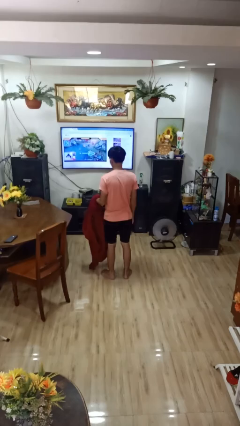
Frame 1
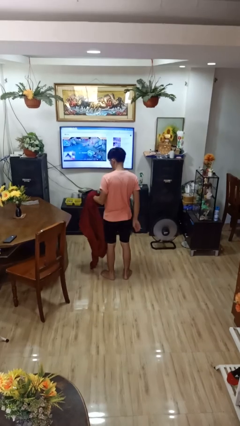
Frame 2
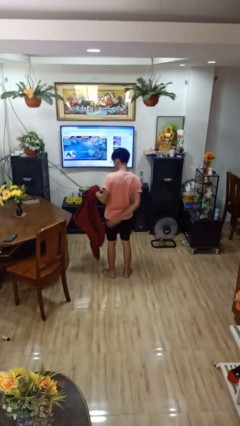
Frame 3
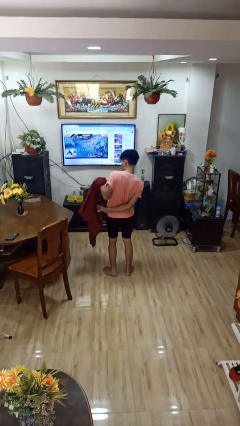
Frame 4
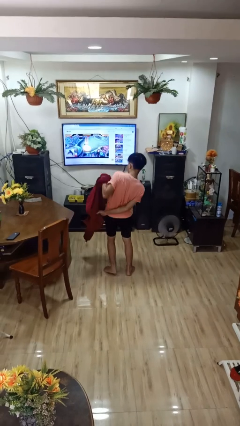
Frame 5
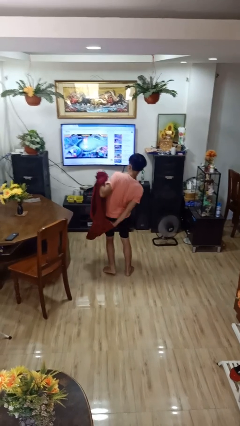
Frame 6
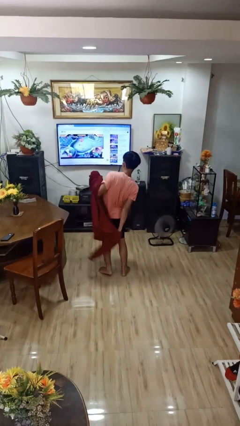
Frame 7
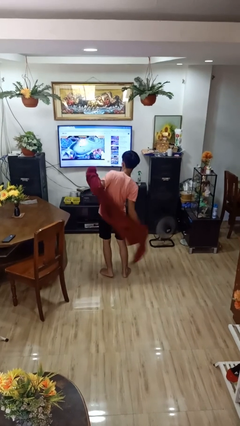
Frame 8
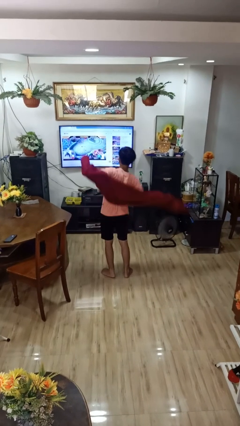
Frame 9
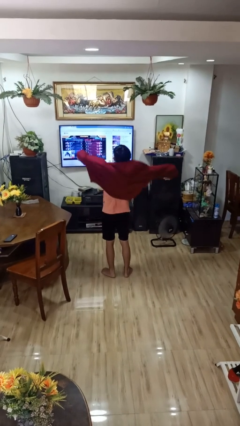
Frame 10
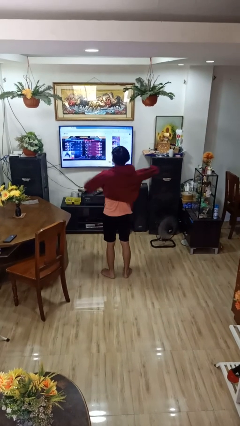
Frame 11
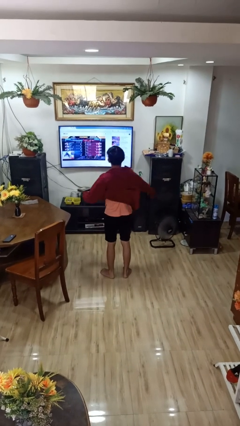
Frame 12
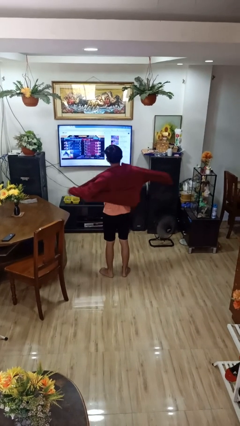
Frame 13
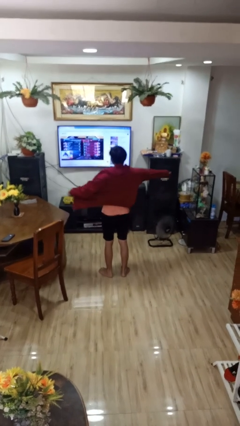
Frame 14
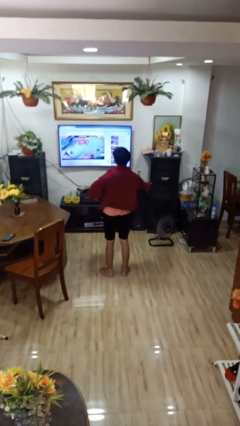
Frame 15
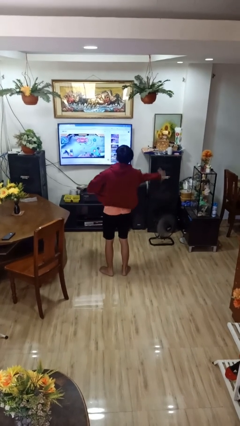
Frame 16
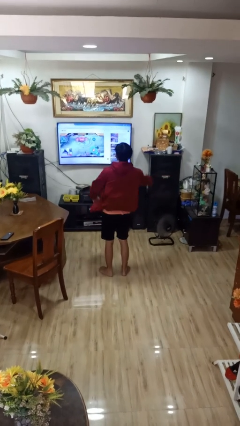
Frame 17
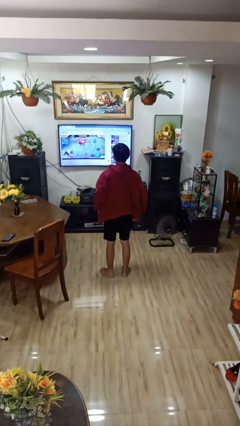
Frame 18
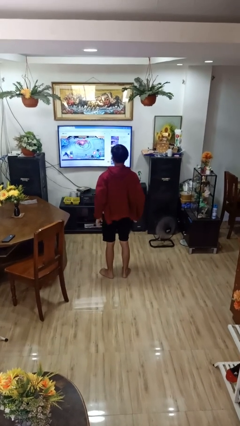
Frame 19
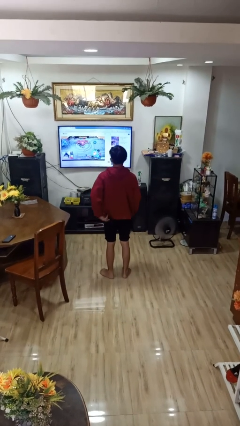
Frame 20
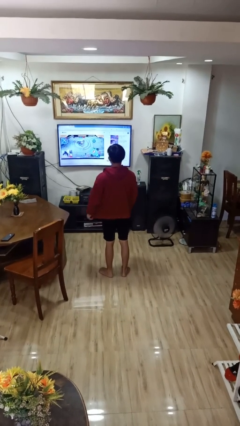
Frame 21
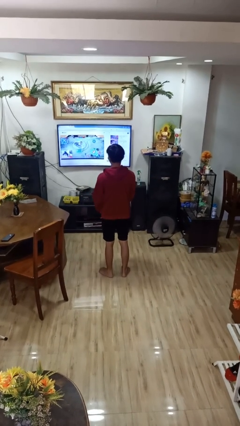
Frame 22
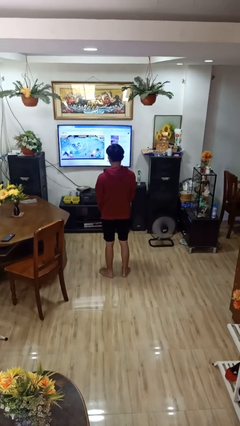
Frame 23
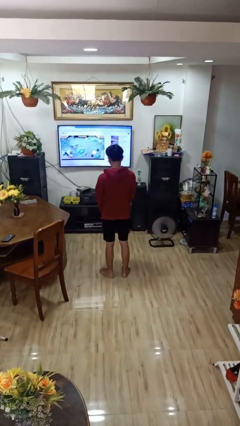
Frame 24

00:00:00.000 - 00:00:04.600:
person puts on jacket

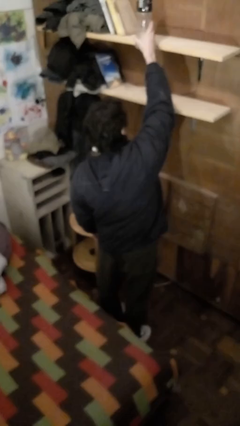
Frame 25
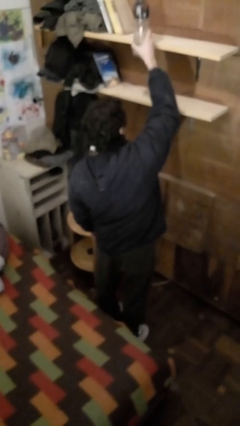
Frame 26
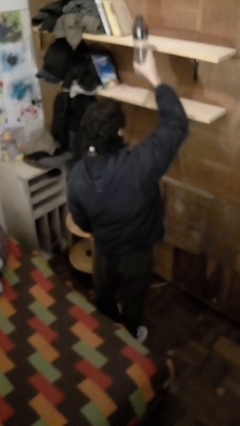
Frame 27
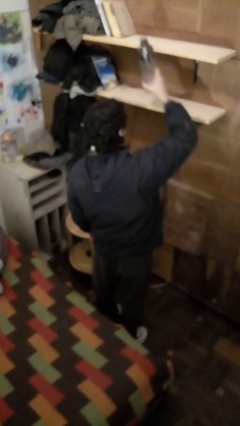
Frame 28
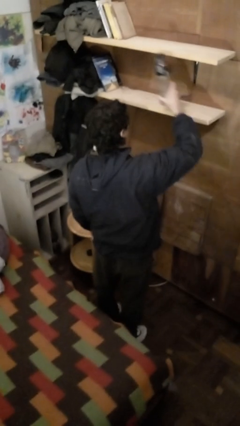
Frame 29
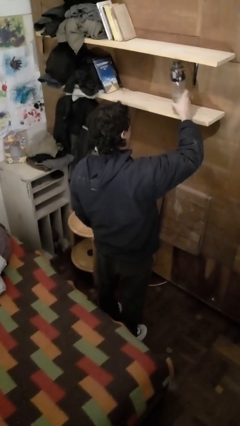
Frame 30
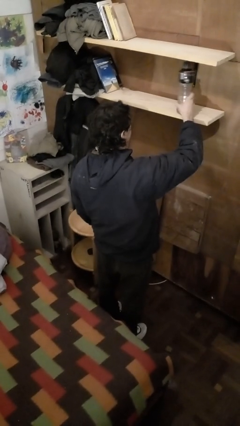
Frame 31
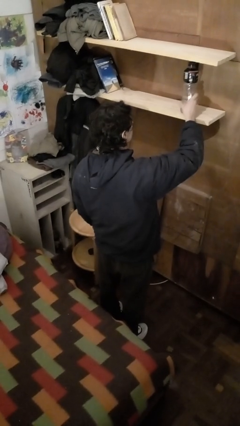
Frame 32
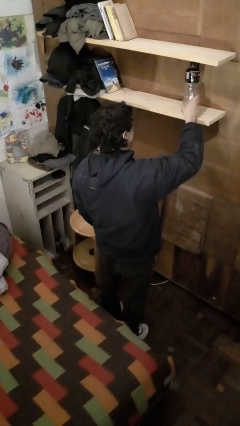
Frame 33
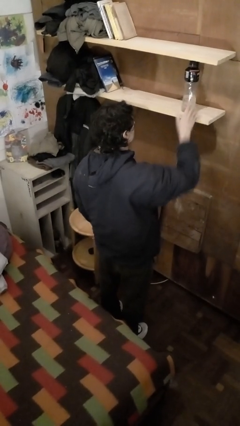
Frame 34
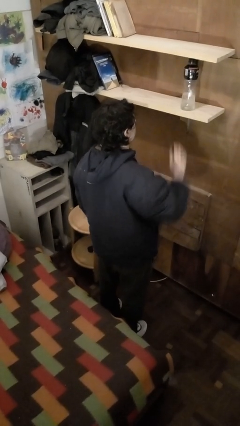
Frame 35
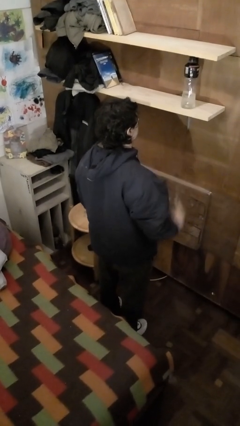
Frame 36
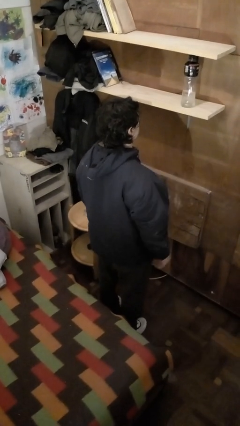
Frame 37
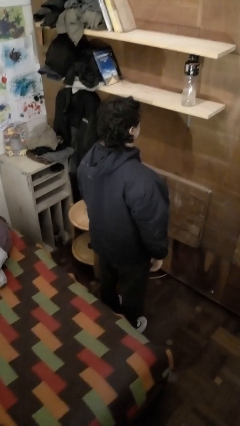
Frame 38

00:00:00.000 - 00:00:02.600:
person puts down object on shelf

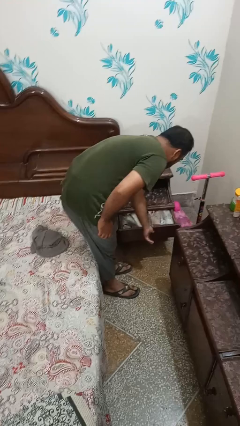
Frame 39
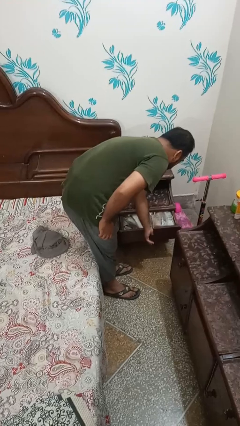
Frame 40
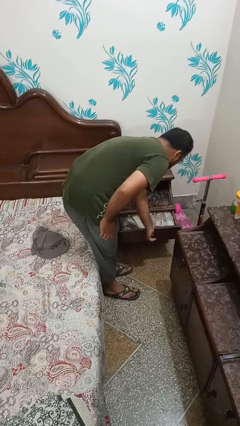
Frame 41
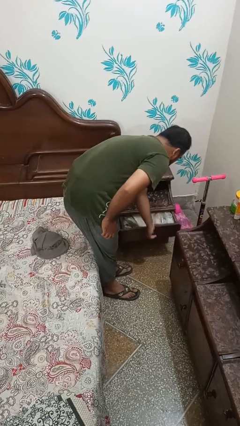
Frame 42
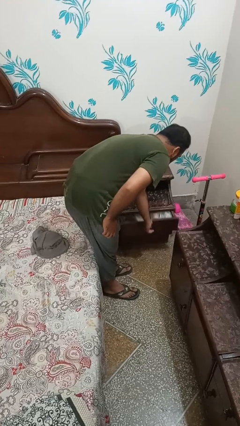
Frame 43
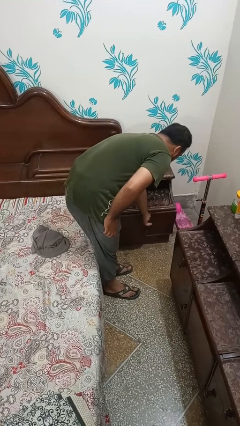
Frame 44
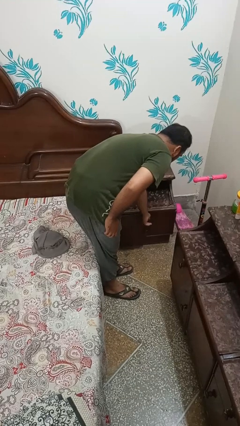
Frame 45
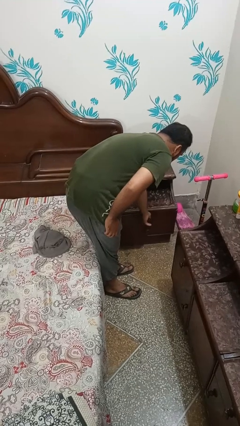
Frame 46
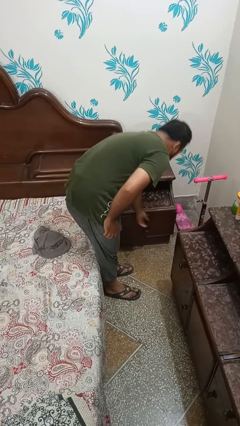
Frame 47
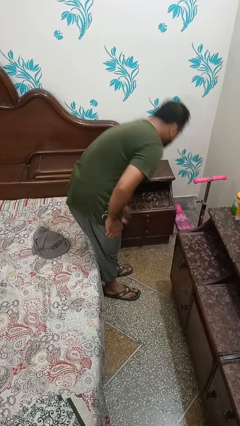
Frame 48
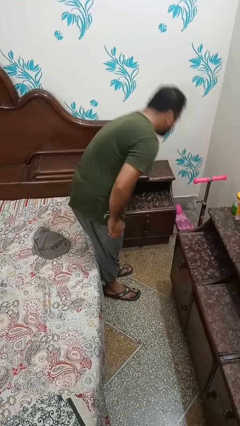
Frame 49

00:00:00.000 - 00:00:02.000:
person closes dresser drawer

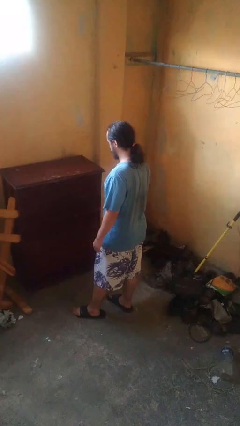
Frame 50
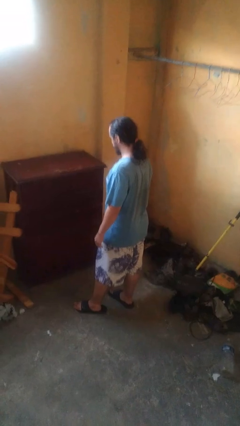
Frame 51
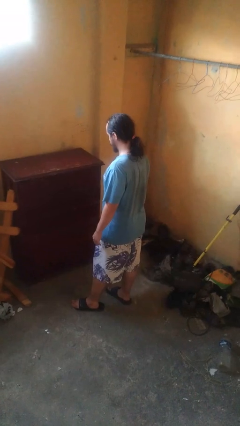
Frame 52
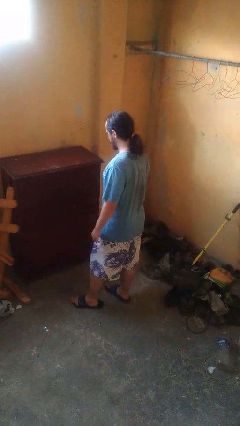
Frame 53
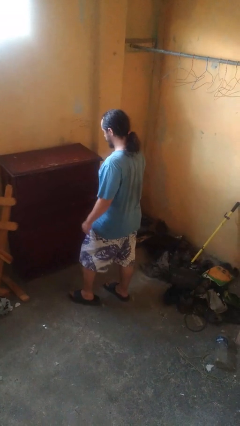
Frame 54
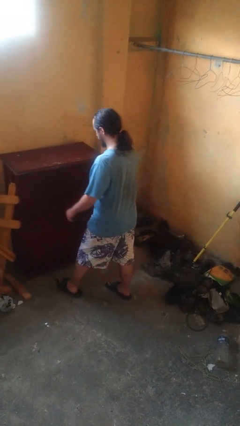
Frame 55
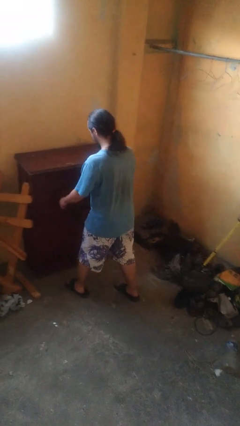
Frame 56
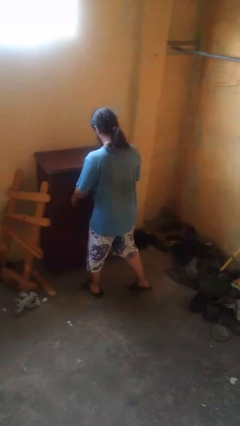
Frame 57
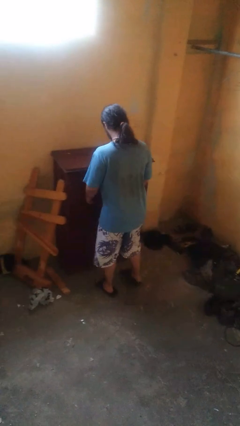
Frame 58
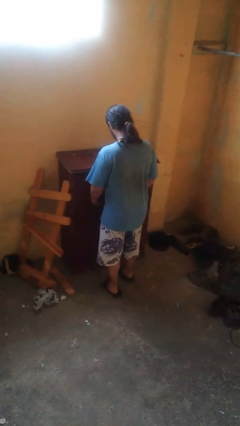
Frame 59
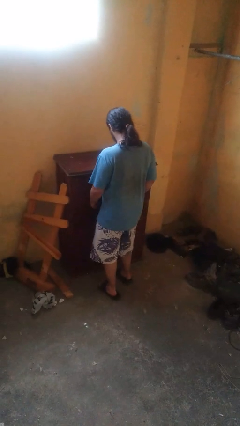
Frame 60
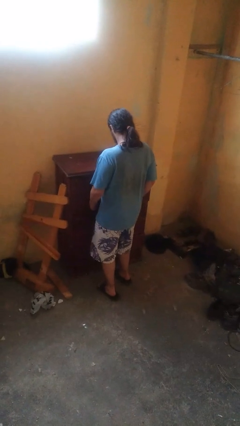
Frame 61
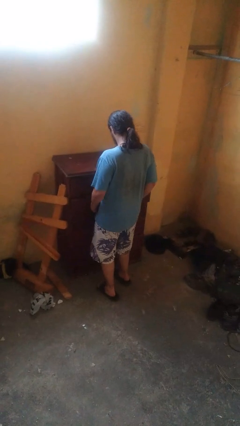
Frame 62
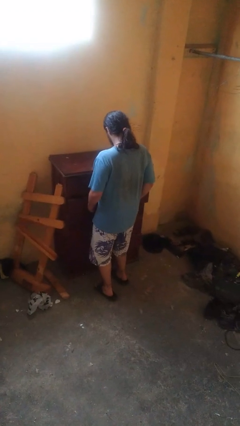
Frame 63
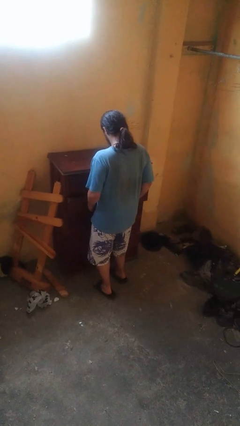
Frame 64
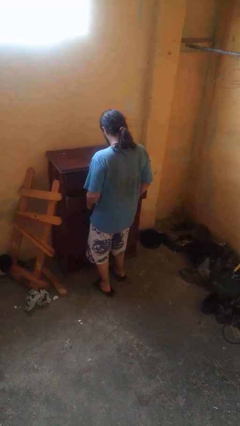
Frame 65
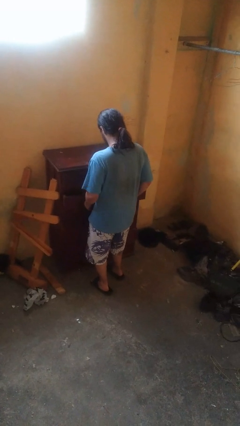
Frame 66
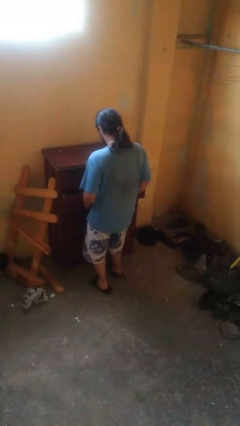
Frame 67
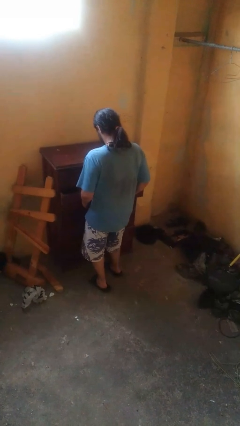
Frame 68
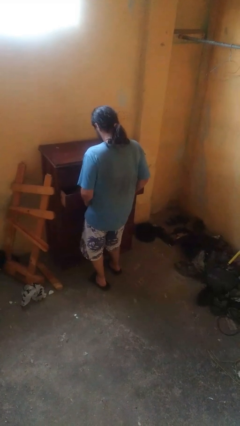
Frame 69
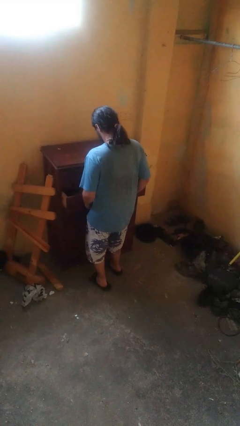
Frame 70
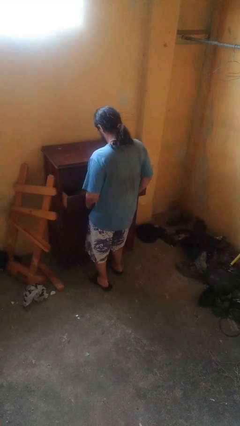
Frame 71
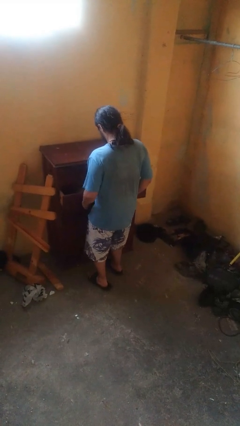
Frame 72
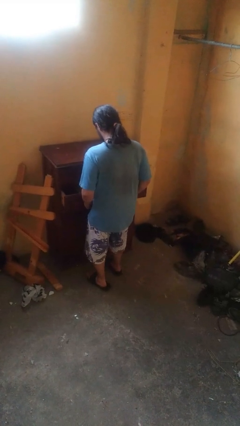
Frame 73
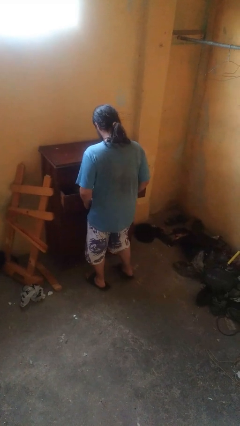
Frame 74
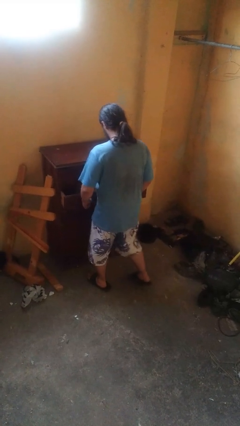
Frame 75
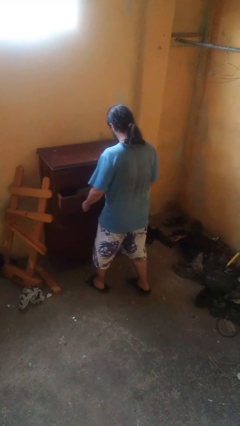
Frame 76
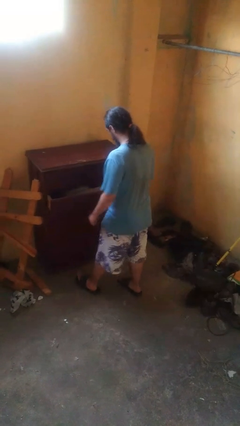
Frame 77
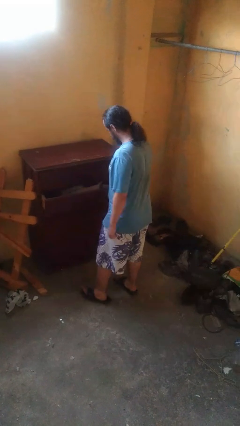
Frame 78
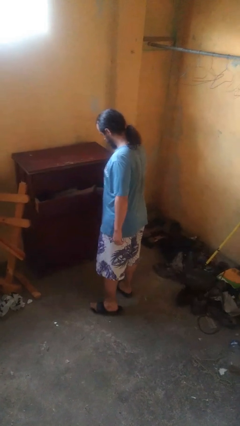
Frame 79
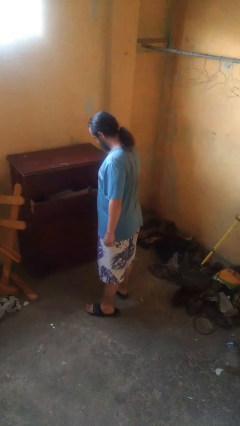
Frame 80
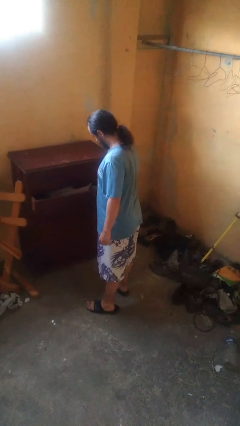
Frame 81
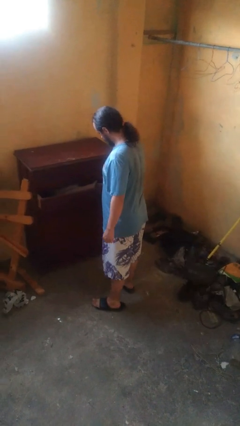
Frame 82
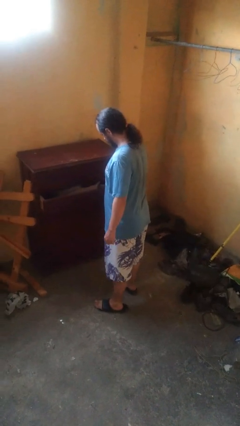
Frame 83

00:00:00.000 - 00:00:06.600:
person opens dresser drawer

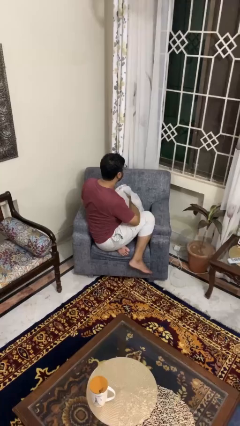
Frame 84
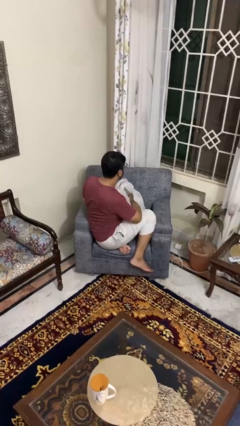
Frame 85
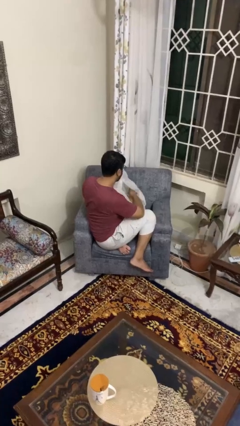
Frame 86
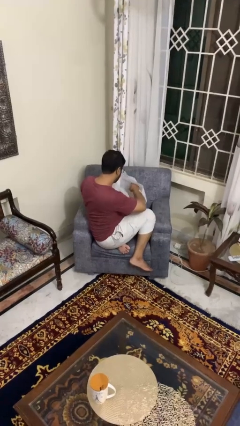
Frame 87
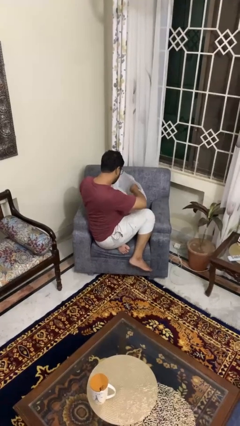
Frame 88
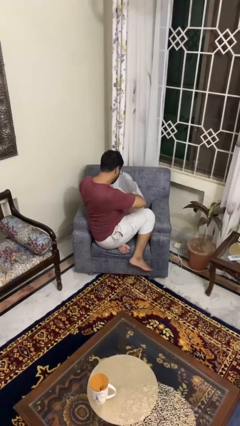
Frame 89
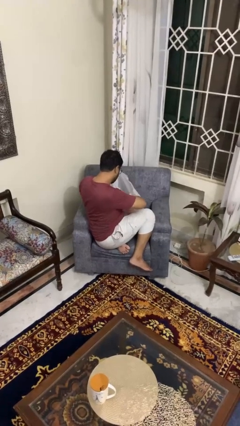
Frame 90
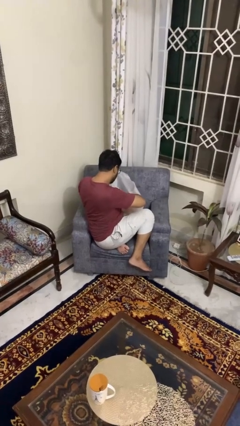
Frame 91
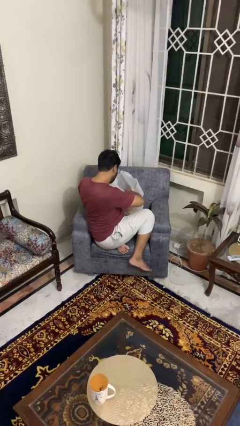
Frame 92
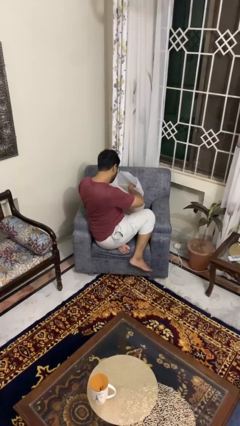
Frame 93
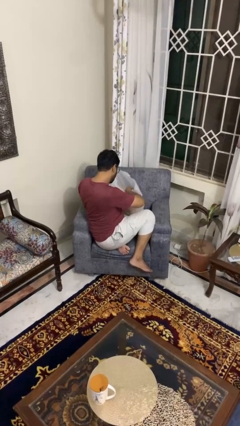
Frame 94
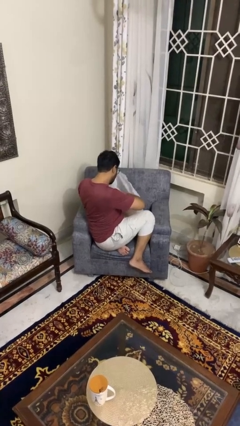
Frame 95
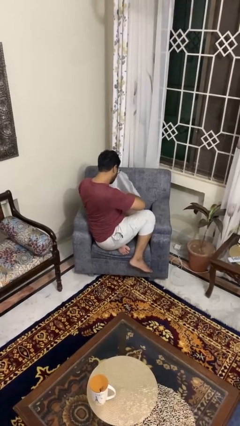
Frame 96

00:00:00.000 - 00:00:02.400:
person searches in bag
